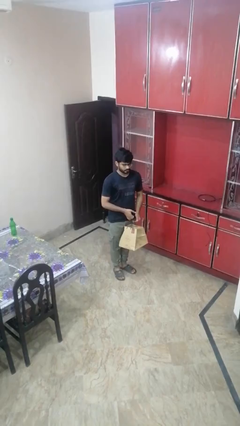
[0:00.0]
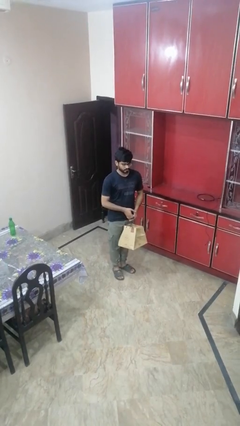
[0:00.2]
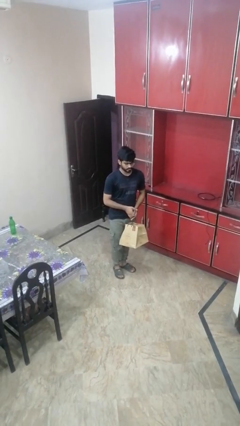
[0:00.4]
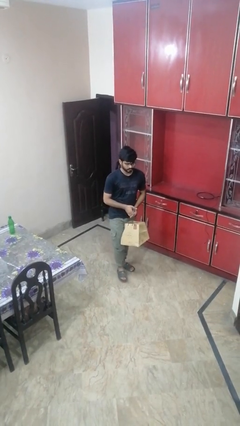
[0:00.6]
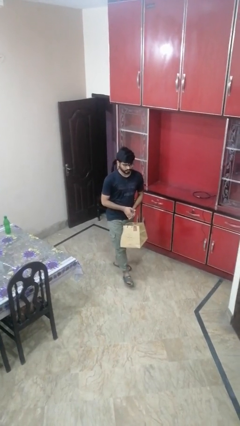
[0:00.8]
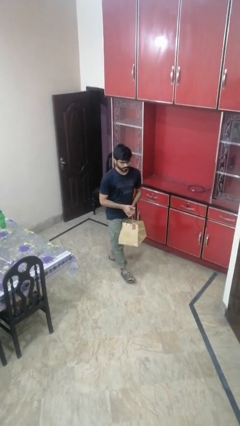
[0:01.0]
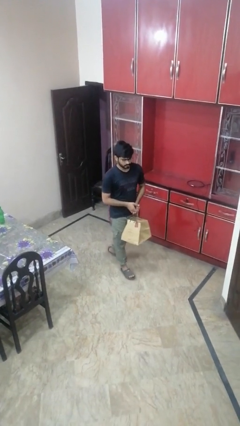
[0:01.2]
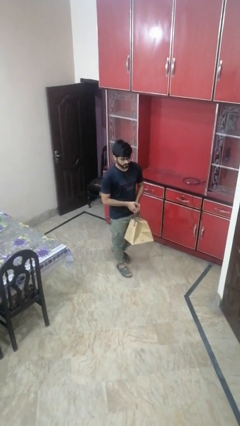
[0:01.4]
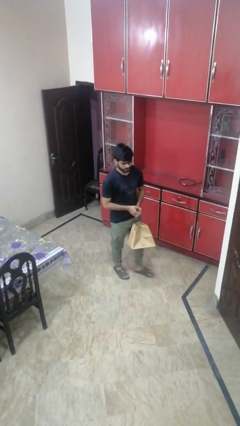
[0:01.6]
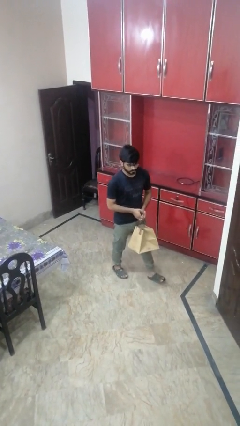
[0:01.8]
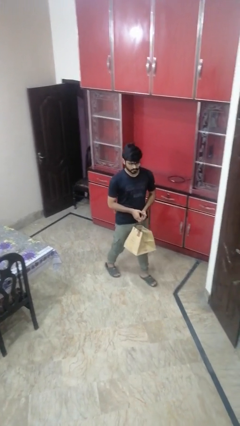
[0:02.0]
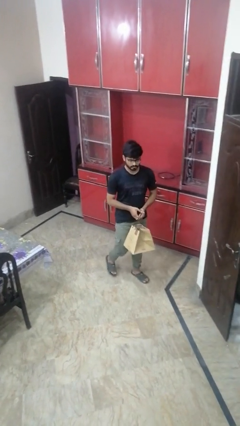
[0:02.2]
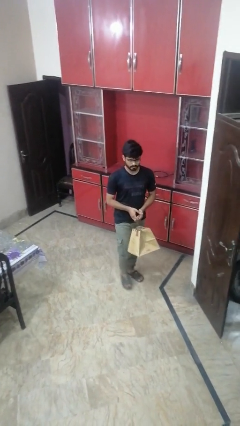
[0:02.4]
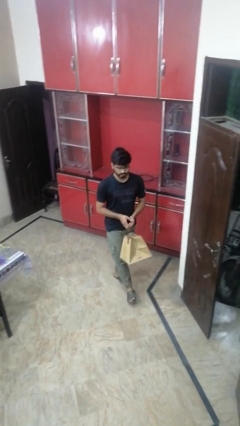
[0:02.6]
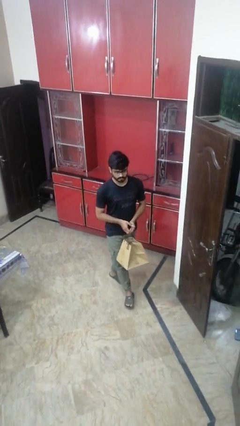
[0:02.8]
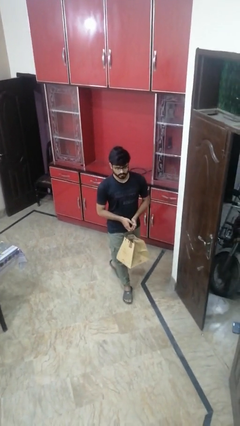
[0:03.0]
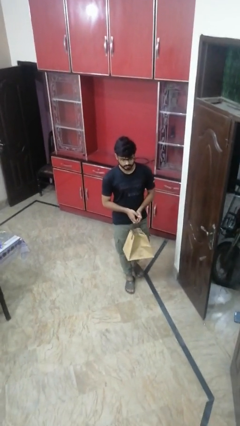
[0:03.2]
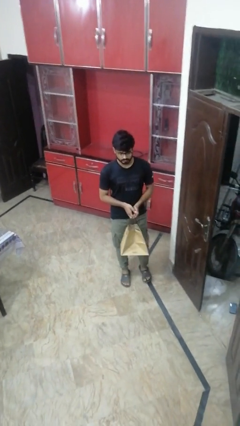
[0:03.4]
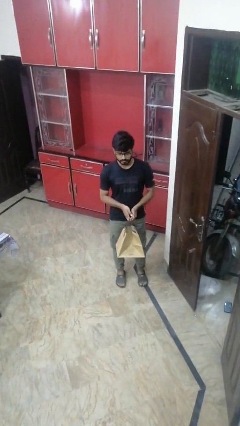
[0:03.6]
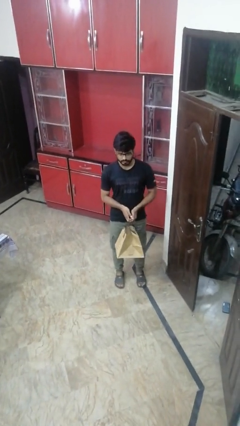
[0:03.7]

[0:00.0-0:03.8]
person carries groceries

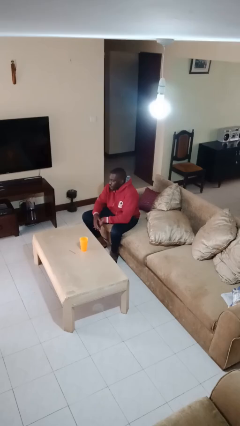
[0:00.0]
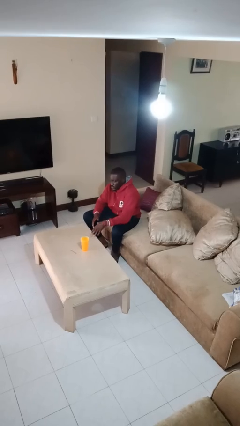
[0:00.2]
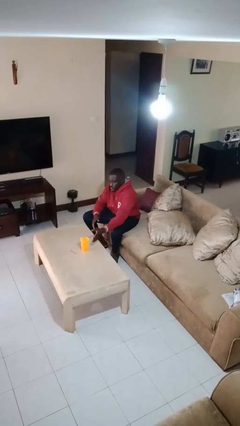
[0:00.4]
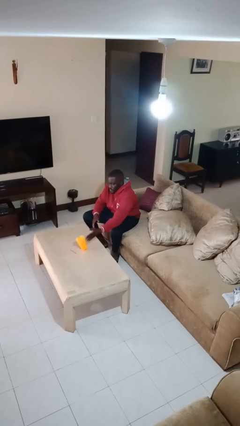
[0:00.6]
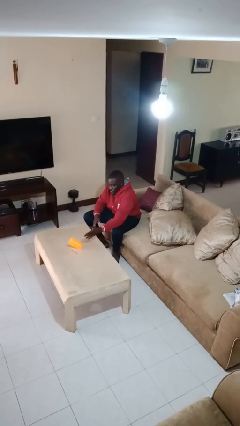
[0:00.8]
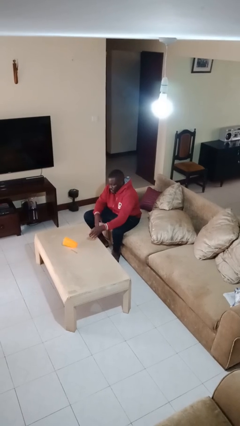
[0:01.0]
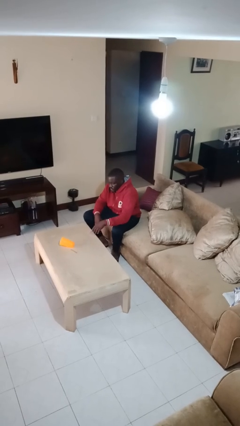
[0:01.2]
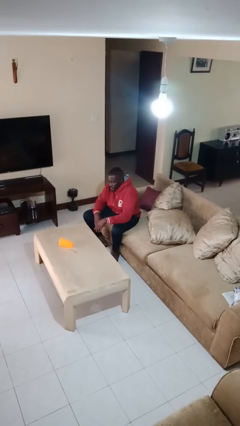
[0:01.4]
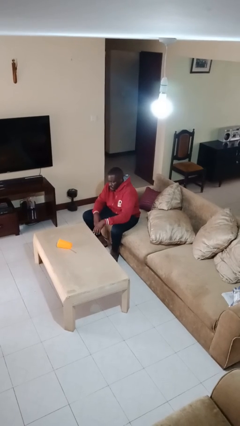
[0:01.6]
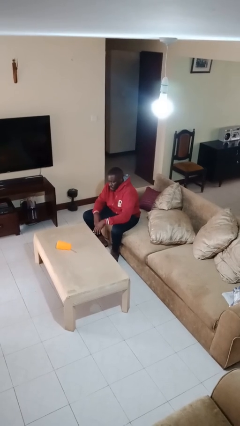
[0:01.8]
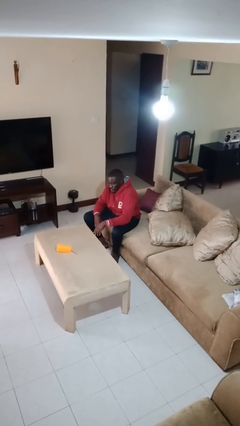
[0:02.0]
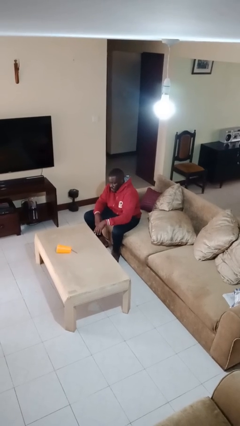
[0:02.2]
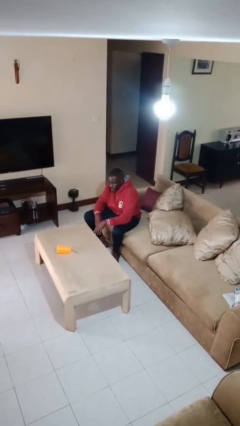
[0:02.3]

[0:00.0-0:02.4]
person knocks over glass

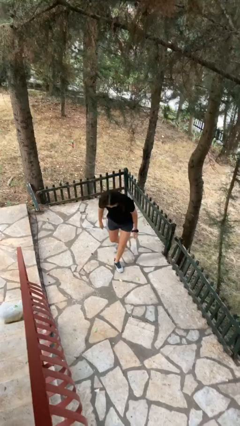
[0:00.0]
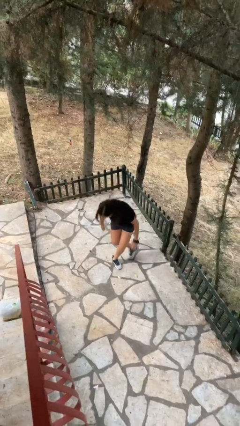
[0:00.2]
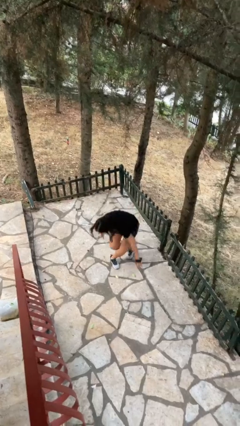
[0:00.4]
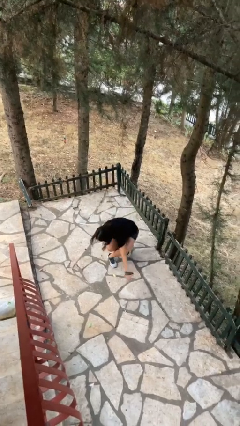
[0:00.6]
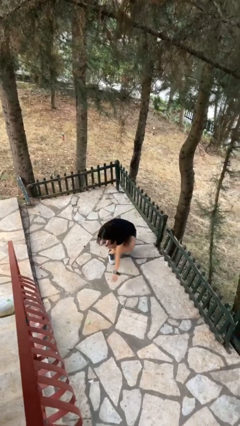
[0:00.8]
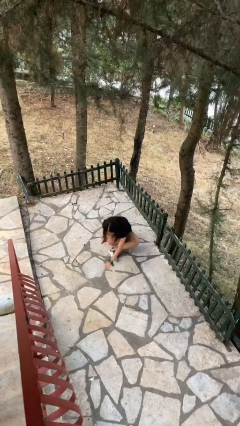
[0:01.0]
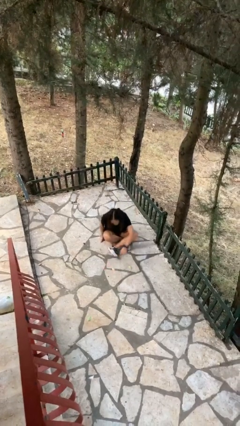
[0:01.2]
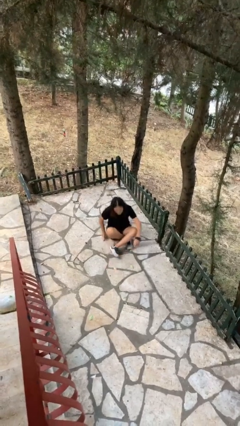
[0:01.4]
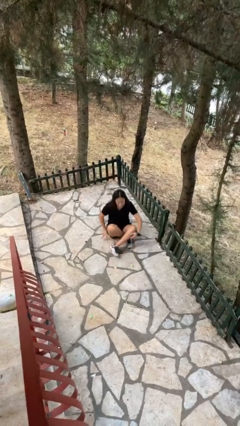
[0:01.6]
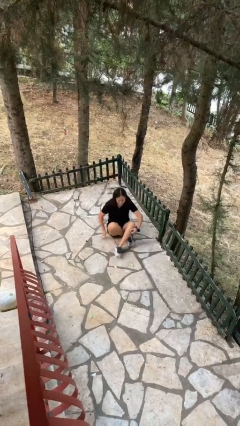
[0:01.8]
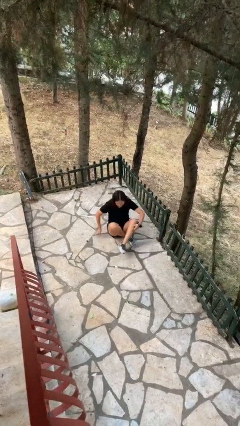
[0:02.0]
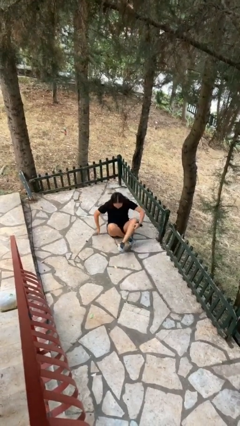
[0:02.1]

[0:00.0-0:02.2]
person sits crisscross

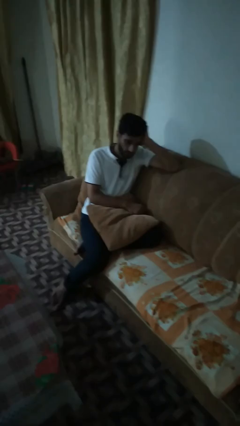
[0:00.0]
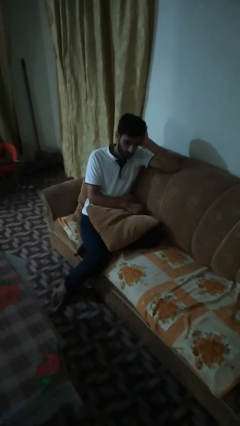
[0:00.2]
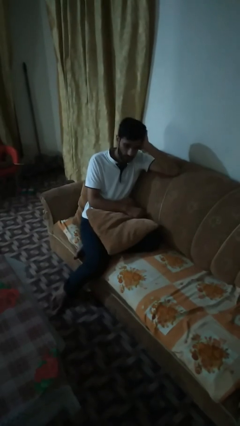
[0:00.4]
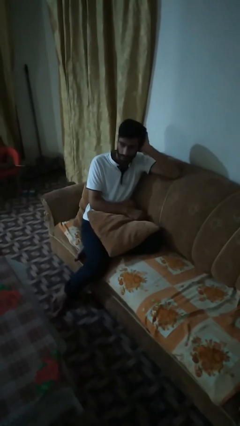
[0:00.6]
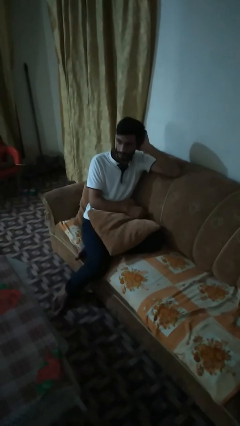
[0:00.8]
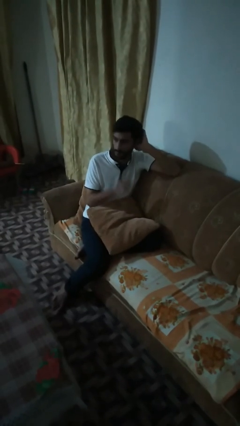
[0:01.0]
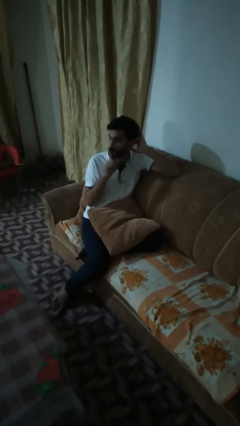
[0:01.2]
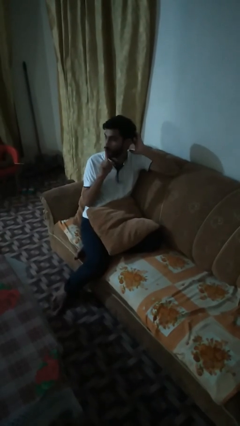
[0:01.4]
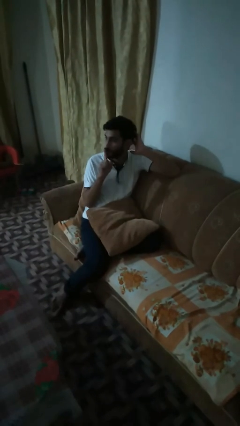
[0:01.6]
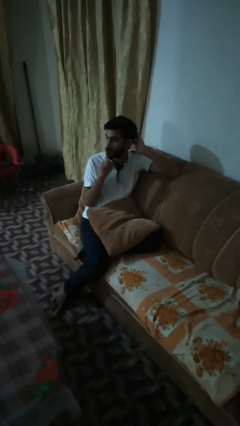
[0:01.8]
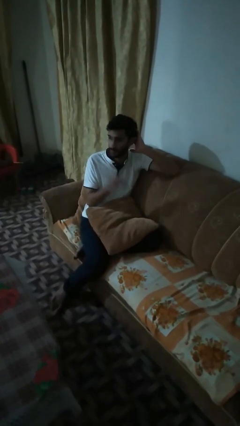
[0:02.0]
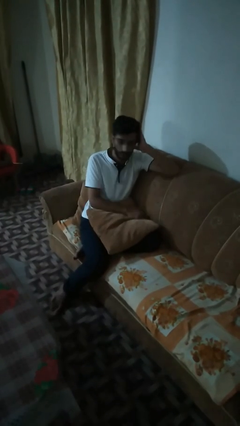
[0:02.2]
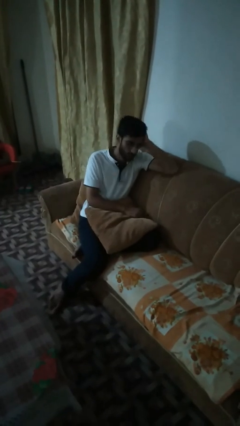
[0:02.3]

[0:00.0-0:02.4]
person gestures be quiet

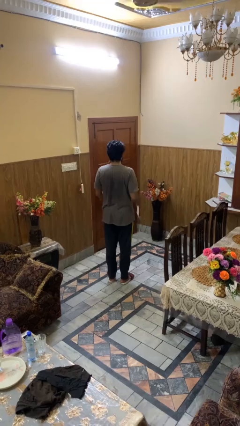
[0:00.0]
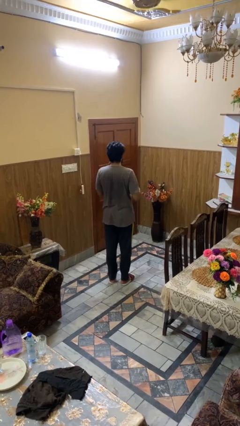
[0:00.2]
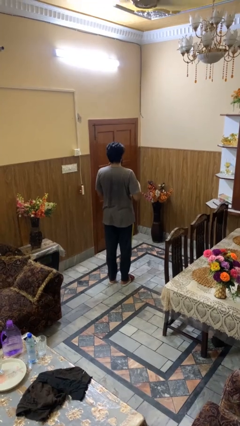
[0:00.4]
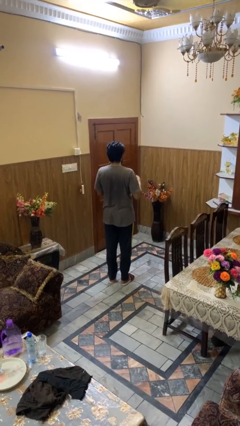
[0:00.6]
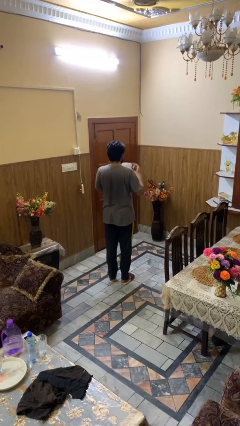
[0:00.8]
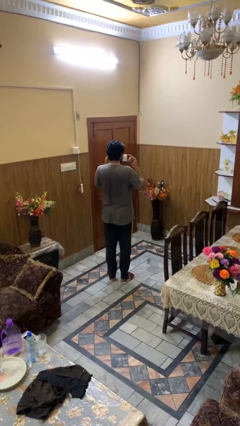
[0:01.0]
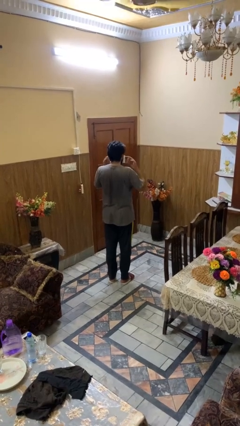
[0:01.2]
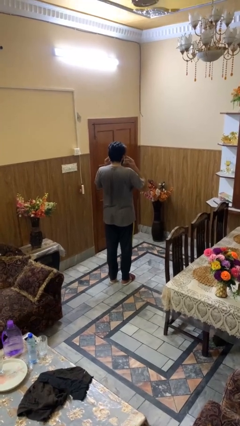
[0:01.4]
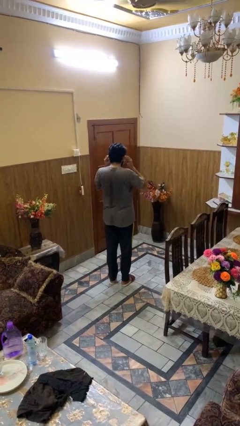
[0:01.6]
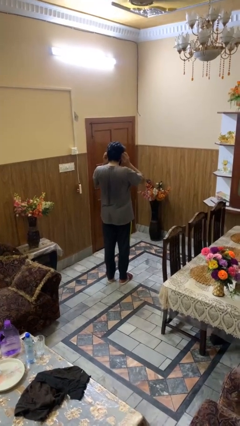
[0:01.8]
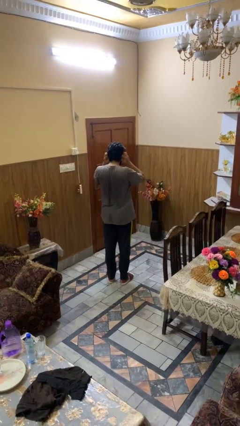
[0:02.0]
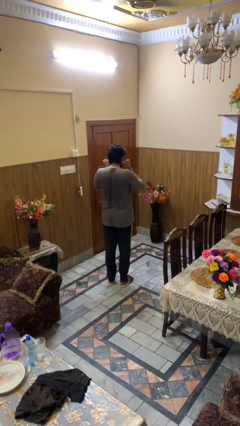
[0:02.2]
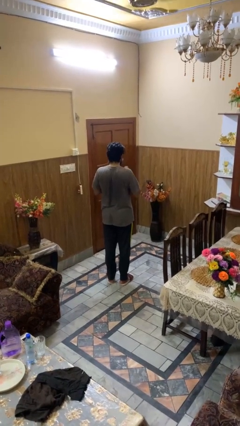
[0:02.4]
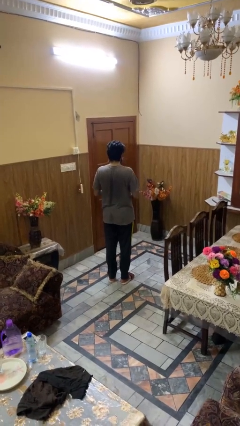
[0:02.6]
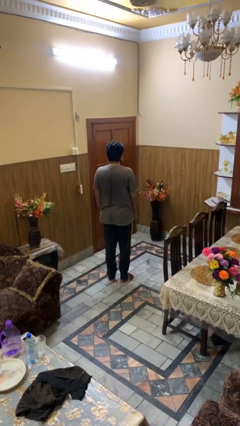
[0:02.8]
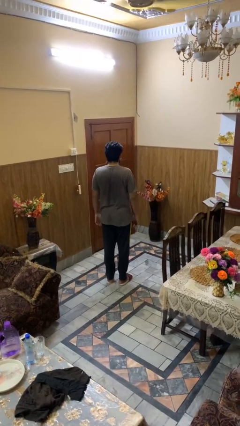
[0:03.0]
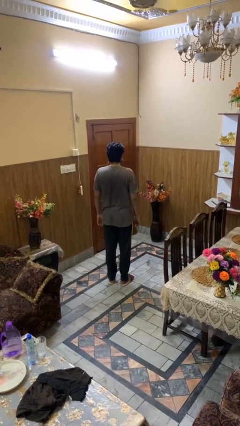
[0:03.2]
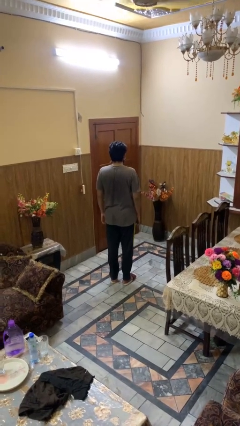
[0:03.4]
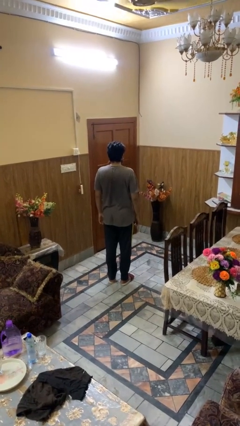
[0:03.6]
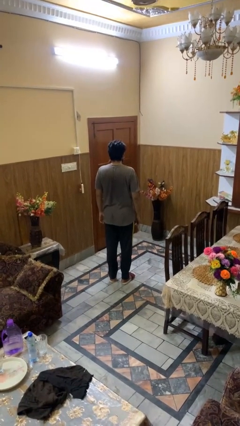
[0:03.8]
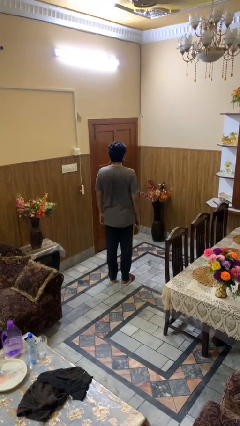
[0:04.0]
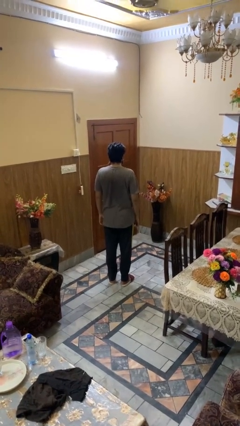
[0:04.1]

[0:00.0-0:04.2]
person puts on facemask

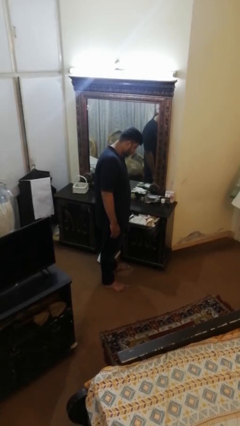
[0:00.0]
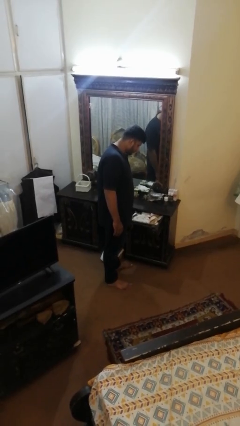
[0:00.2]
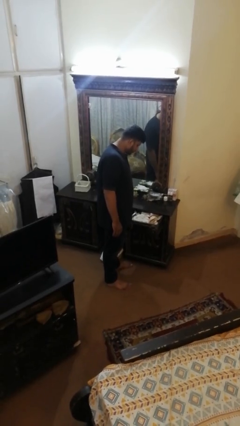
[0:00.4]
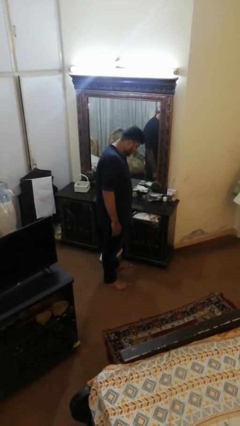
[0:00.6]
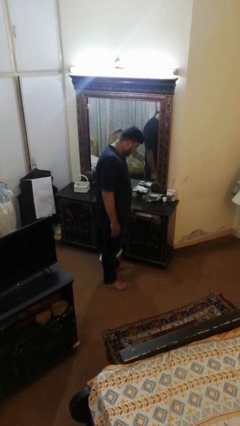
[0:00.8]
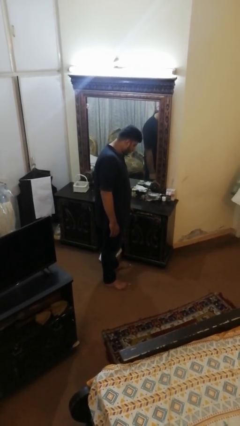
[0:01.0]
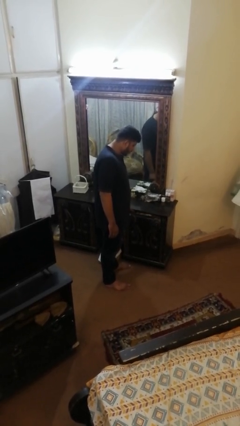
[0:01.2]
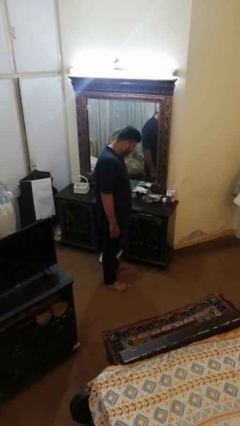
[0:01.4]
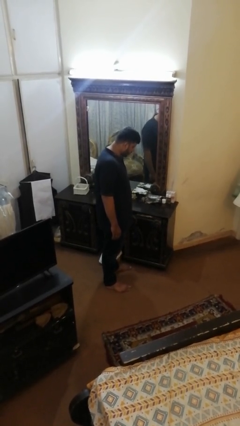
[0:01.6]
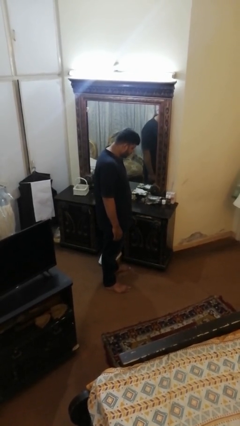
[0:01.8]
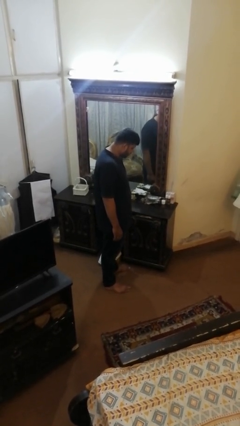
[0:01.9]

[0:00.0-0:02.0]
person closes dresser drawer

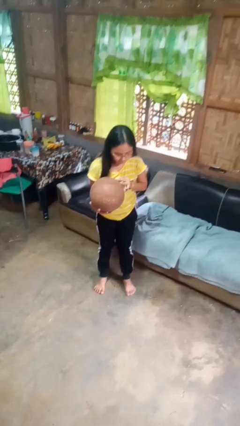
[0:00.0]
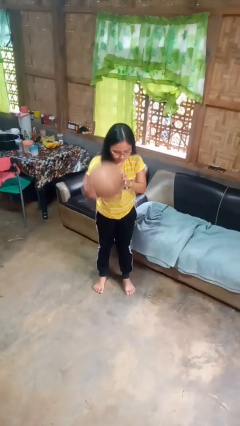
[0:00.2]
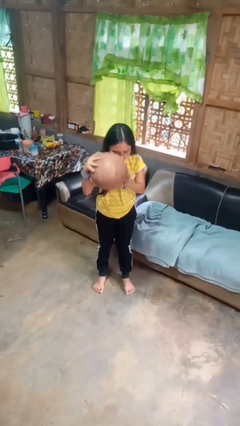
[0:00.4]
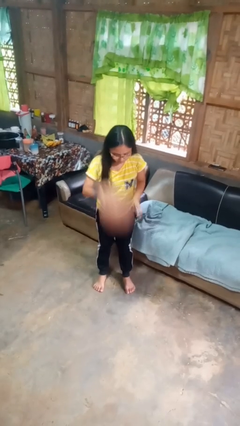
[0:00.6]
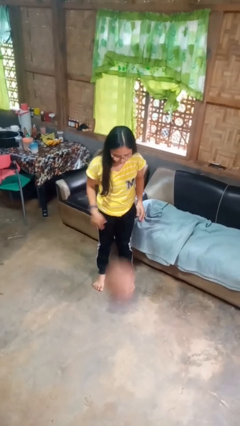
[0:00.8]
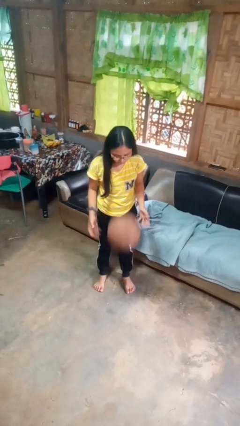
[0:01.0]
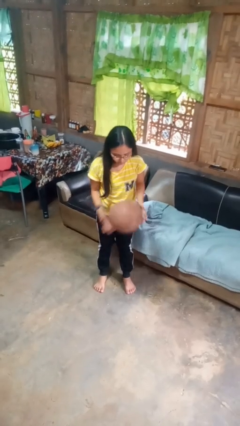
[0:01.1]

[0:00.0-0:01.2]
person bounces ball on floor
